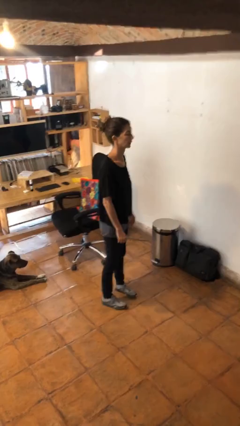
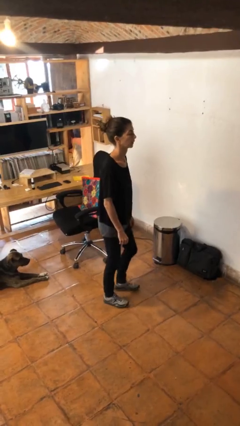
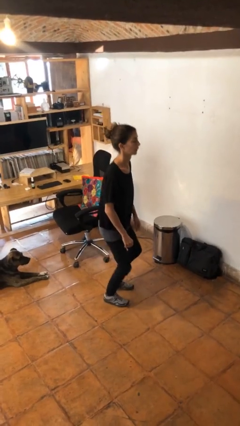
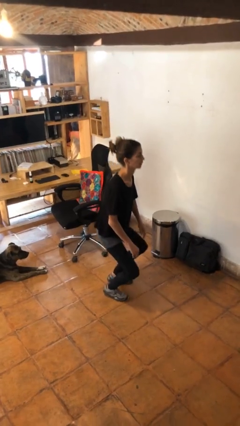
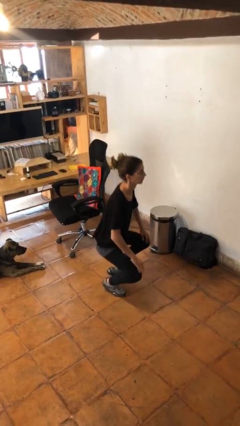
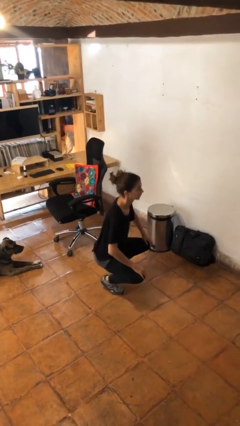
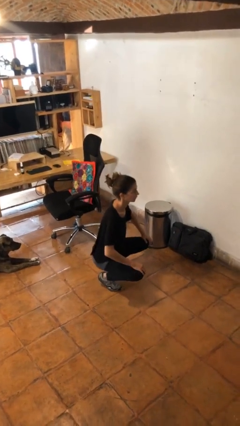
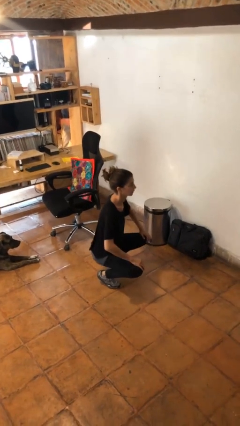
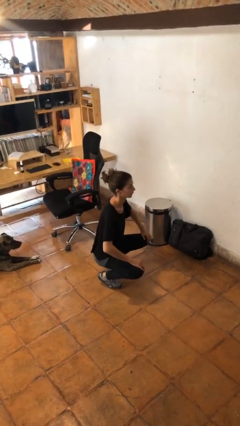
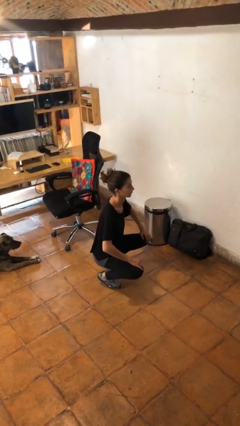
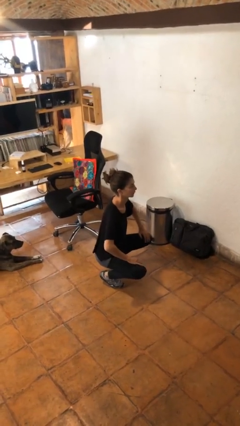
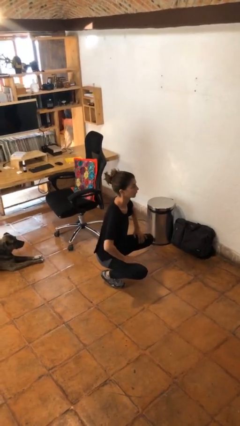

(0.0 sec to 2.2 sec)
person squats

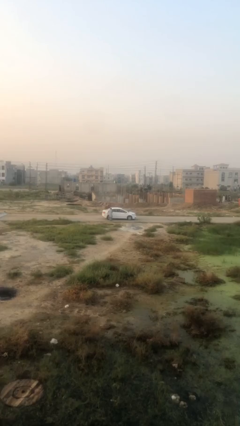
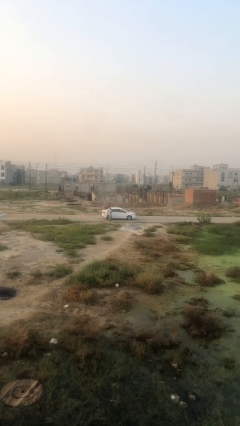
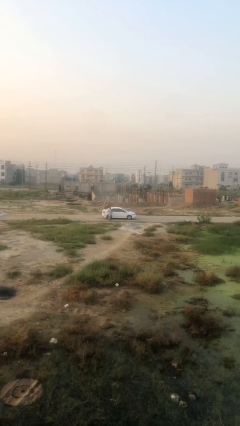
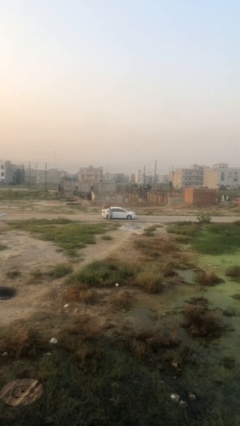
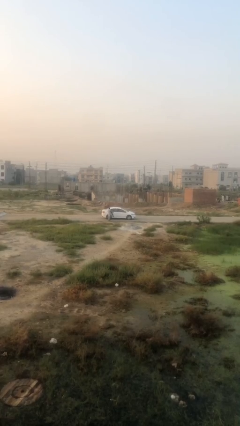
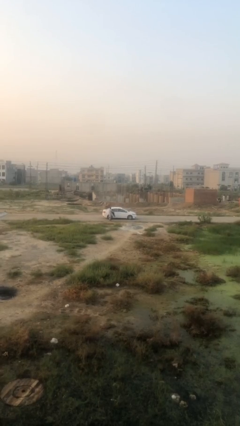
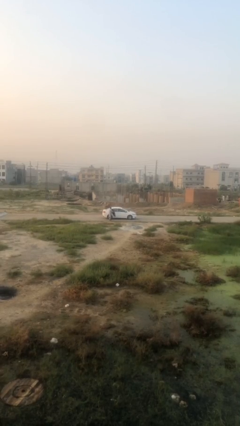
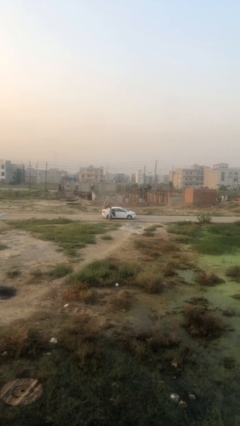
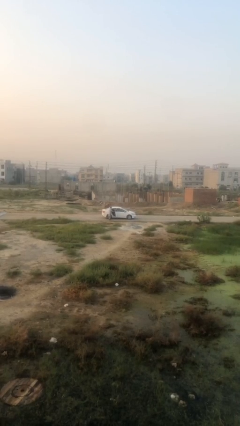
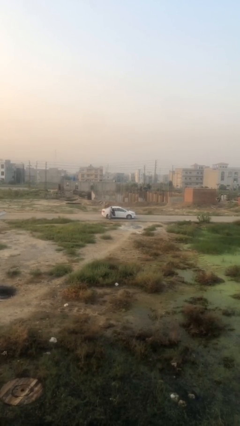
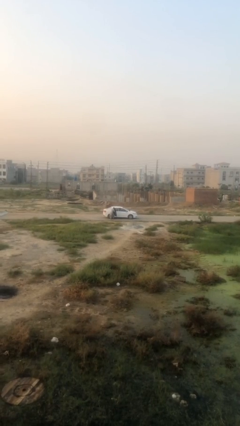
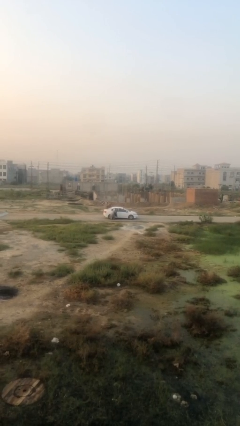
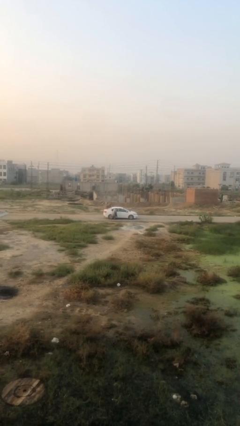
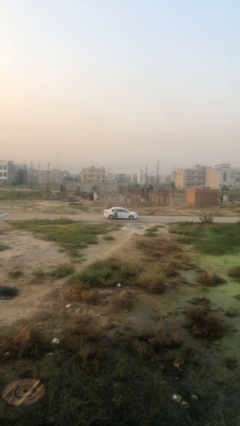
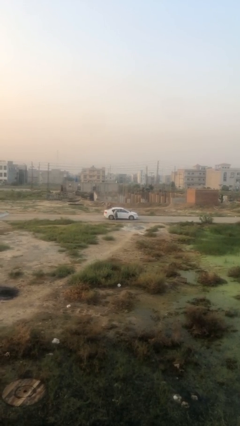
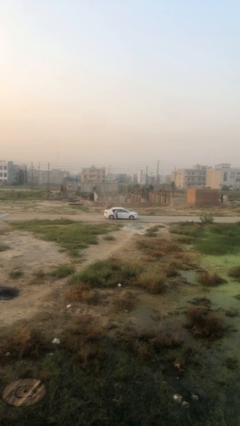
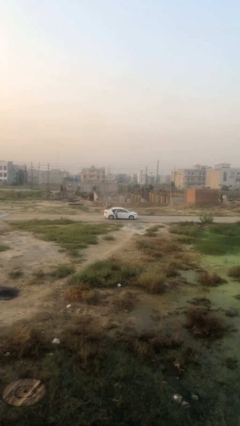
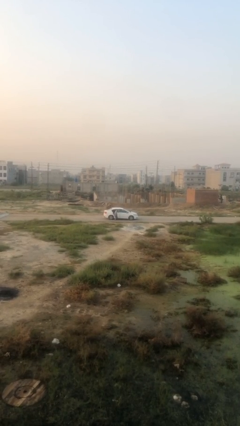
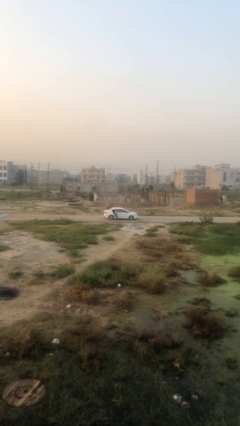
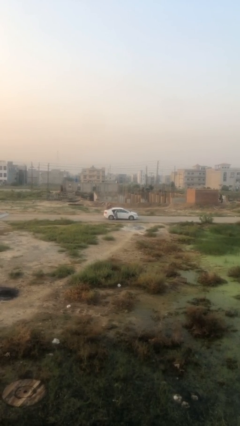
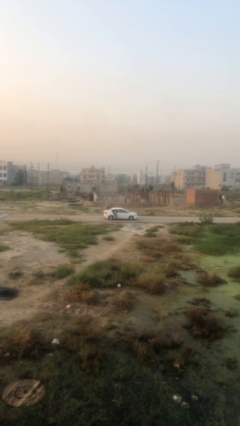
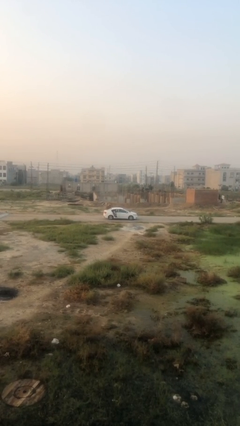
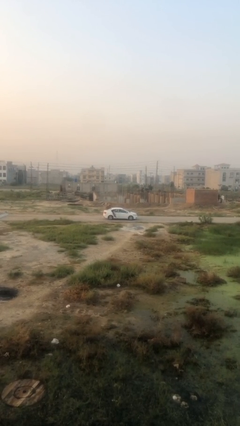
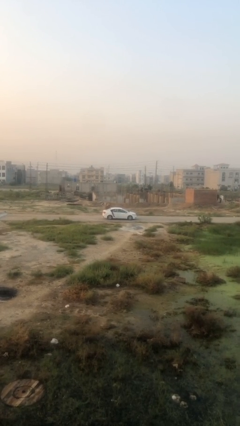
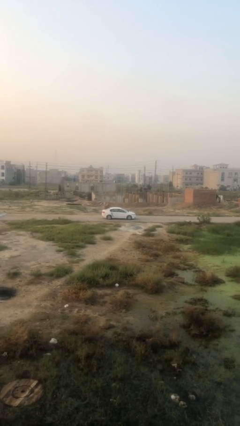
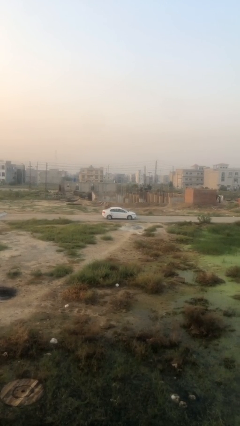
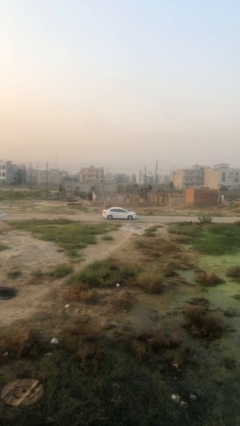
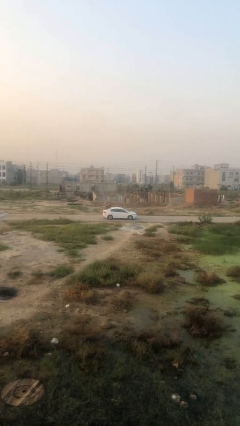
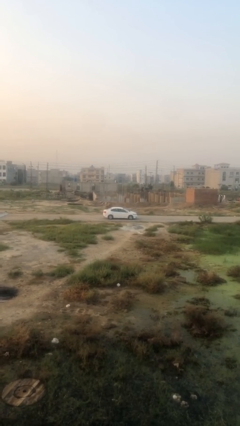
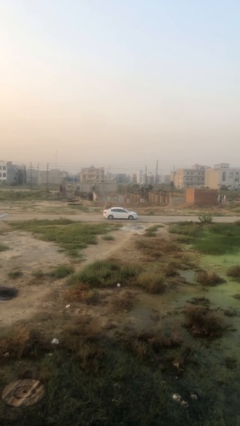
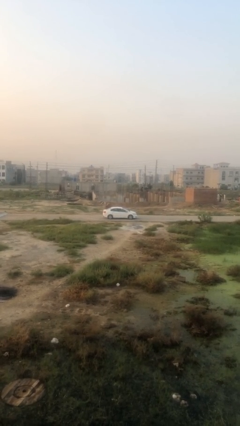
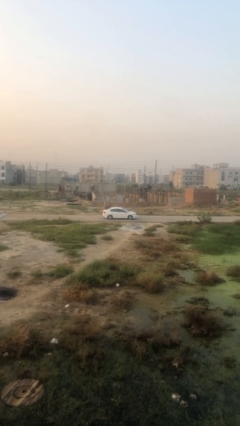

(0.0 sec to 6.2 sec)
car picks up person

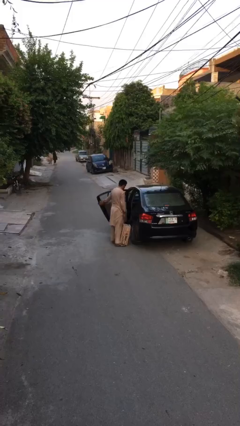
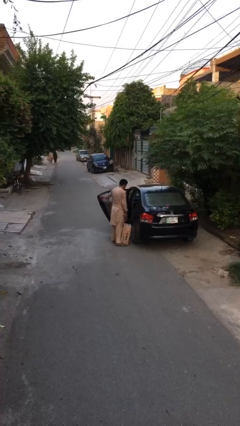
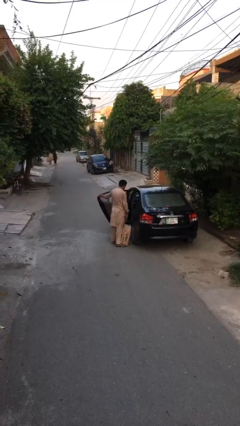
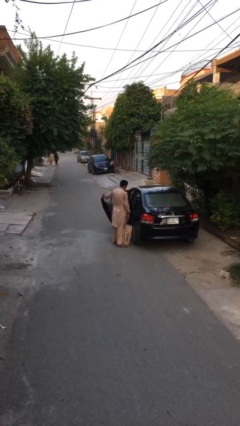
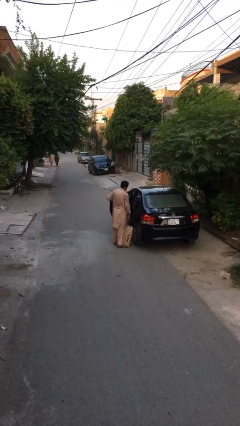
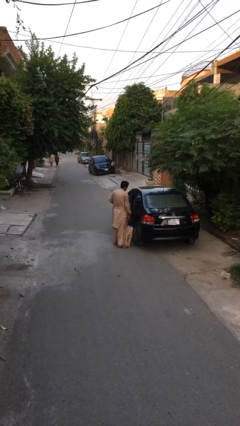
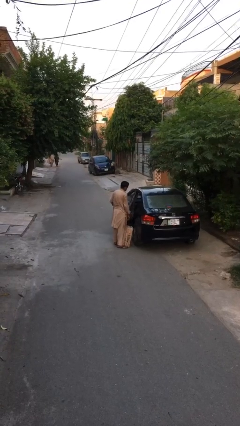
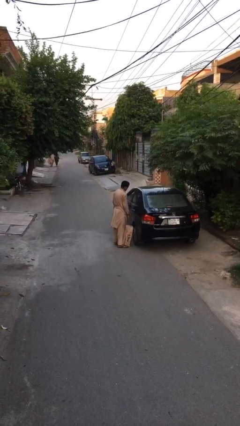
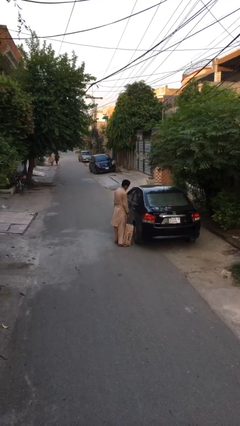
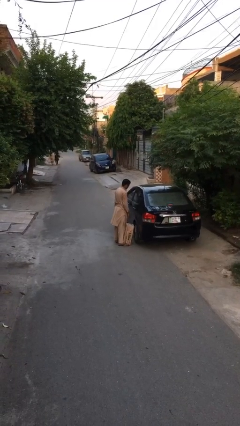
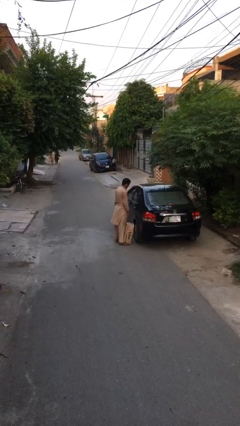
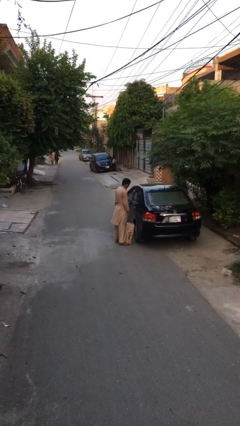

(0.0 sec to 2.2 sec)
person closes car door

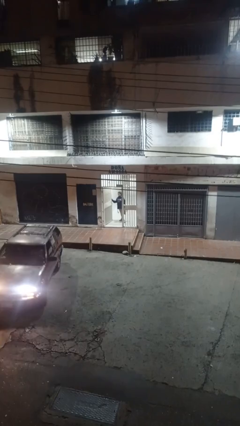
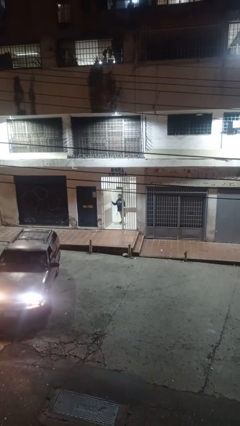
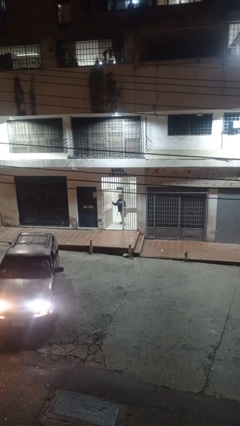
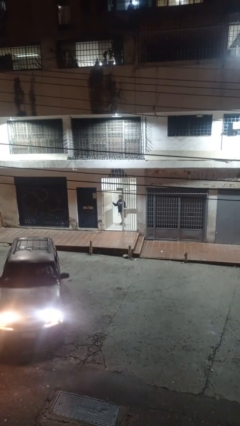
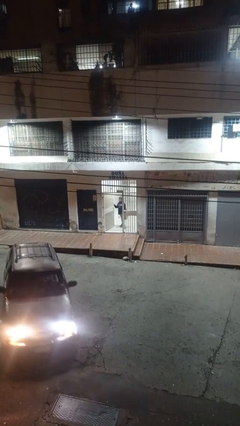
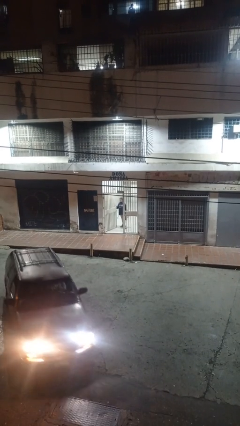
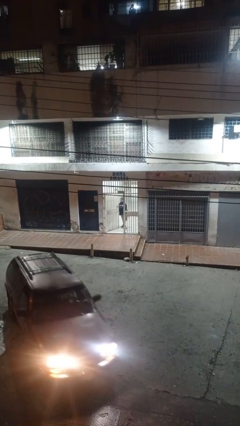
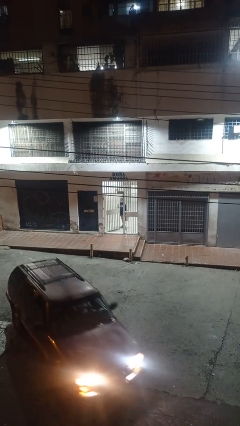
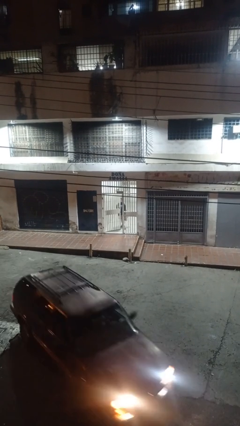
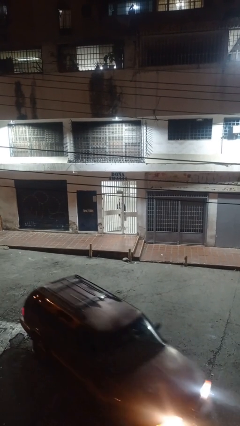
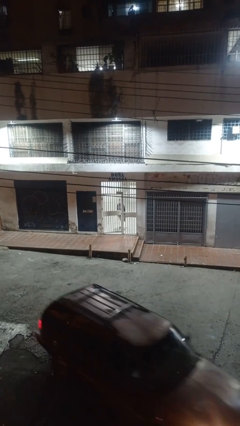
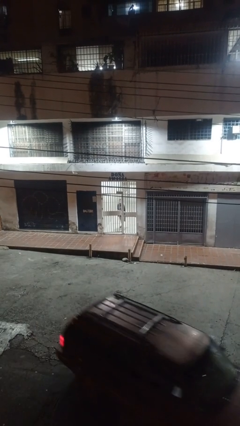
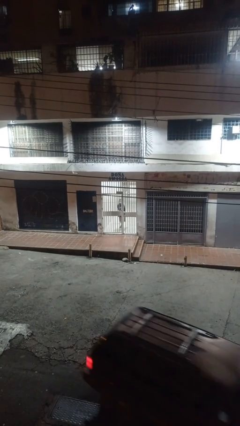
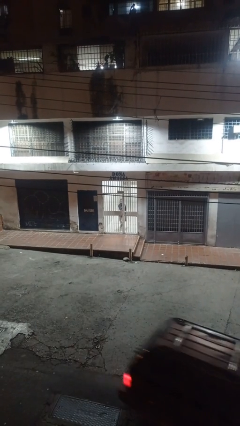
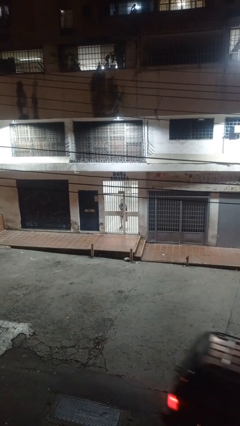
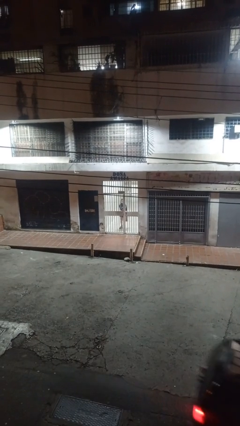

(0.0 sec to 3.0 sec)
person closes gate

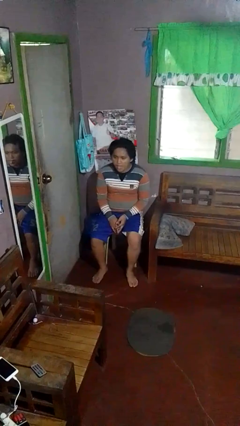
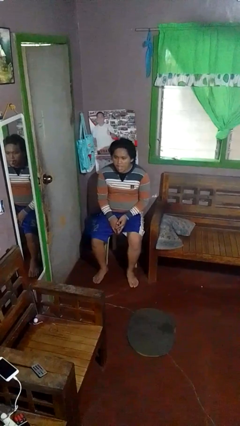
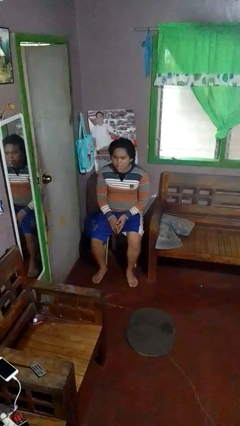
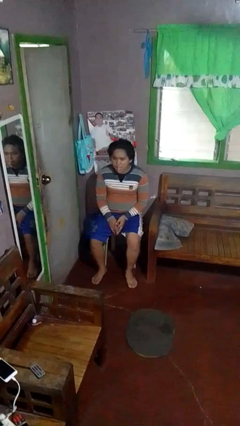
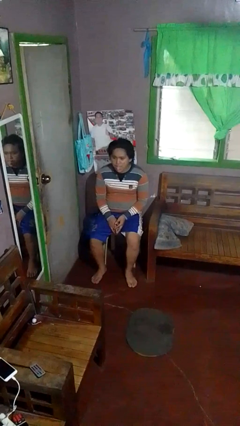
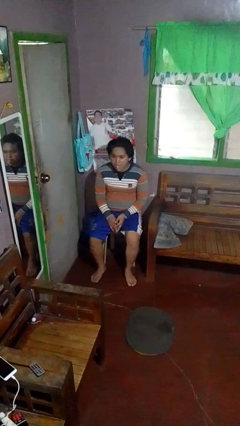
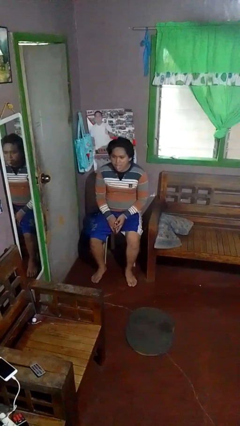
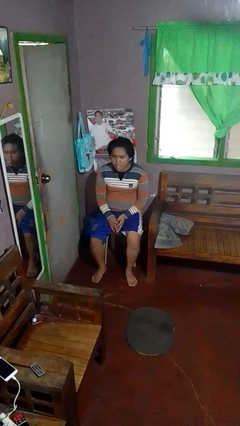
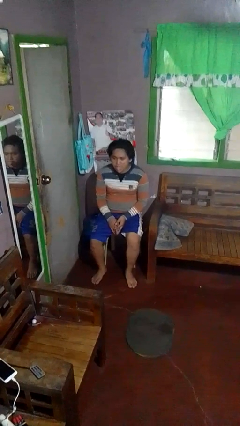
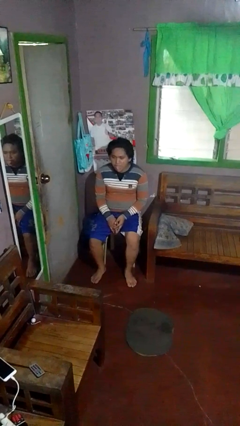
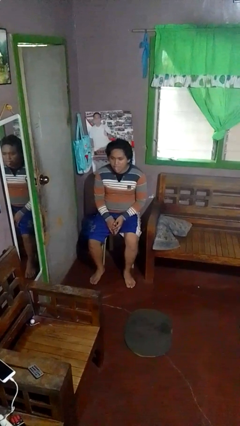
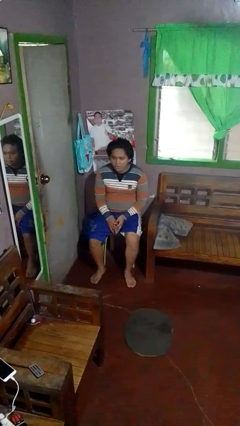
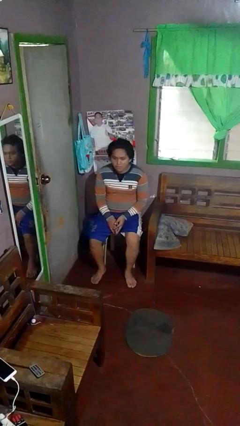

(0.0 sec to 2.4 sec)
person sticks out tongue

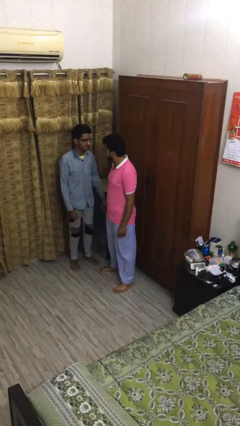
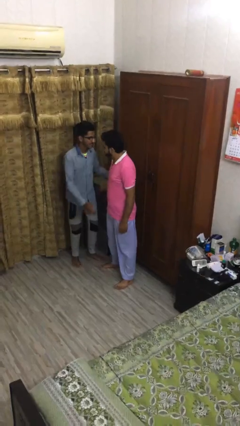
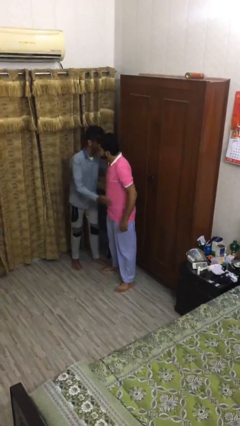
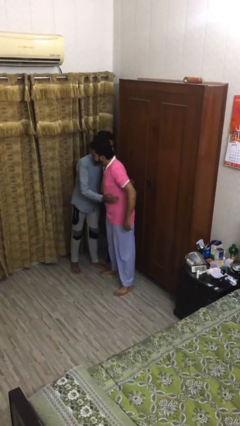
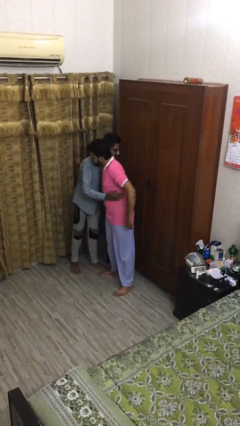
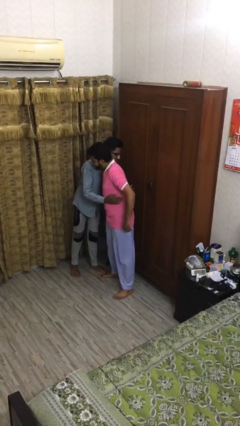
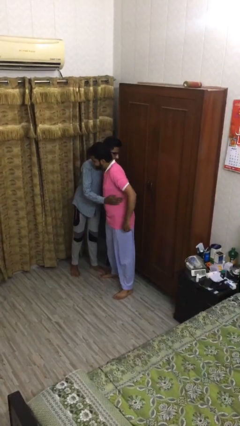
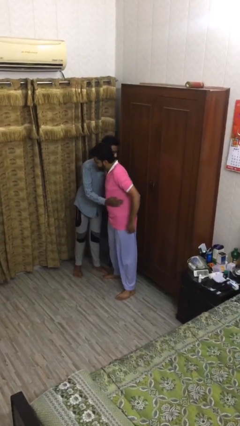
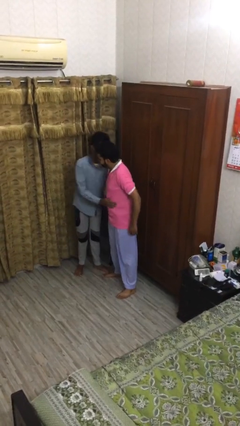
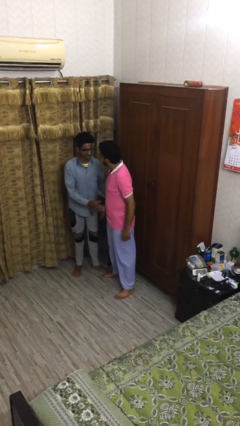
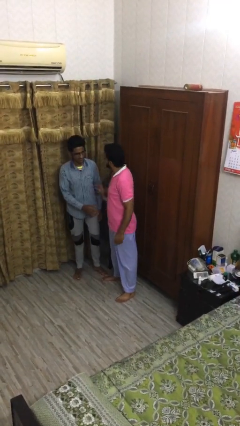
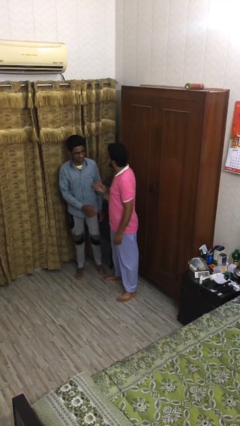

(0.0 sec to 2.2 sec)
person embraces person
